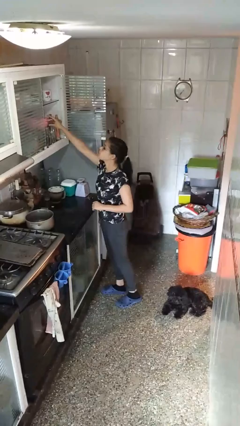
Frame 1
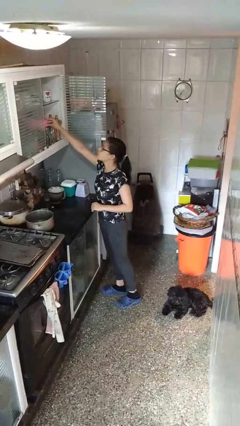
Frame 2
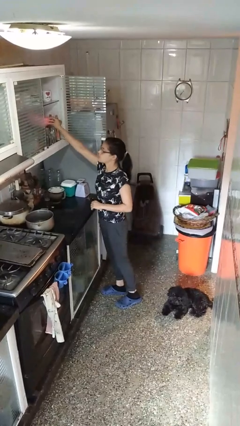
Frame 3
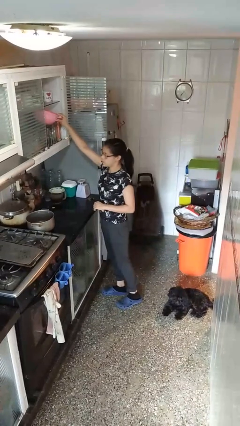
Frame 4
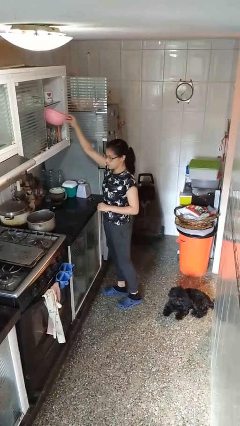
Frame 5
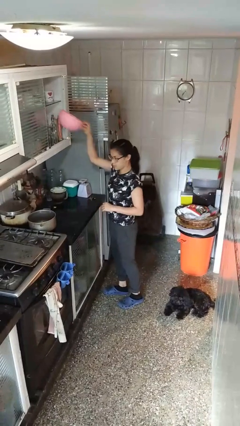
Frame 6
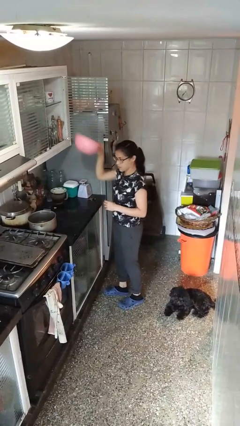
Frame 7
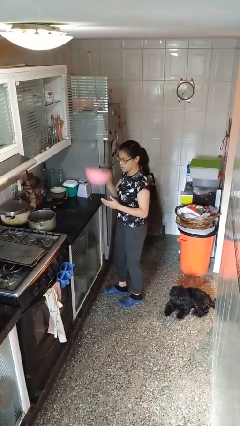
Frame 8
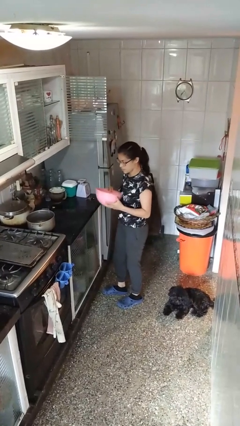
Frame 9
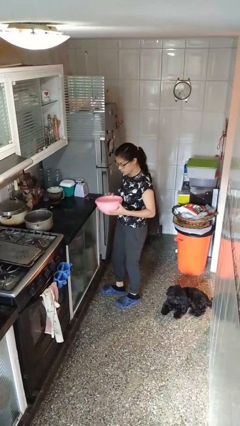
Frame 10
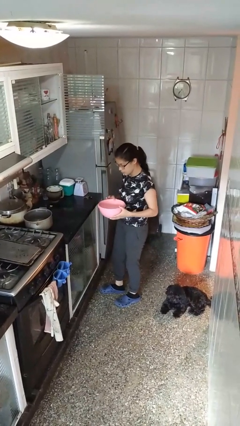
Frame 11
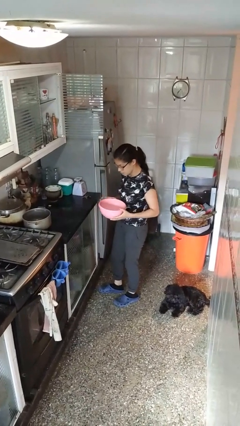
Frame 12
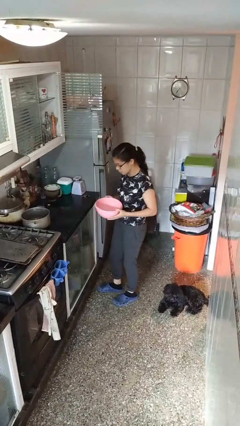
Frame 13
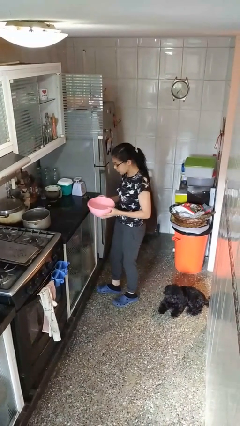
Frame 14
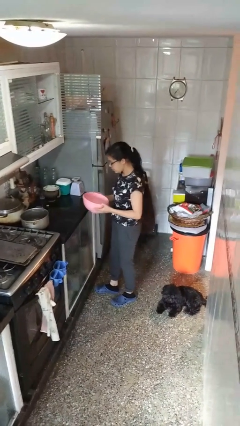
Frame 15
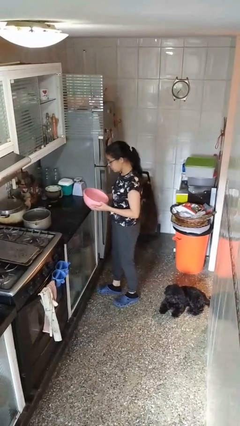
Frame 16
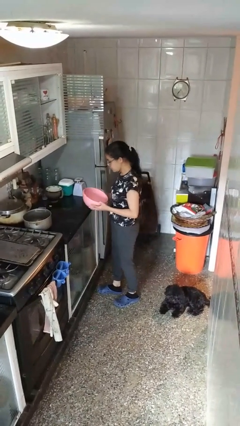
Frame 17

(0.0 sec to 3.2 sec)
person picks up object from cabinet

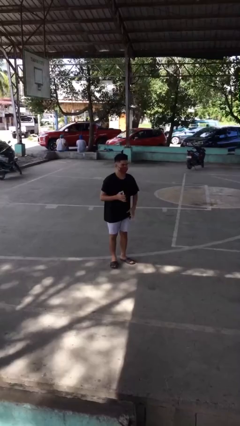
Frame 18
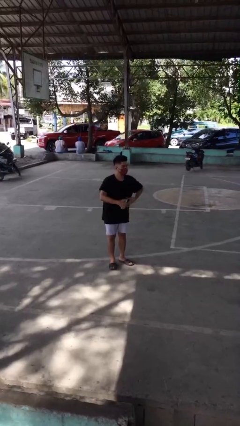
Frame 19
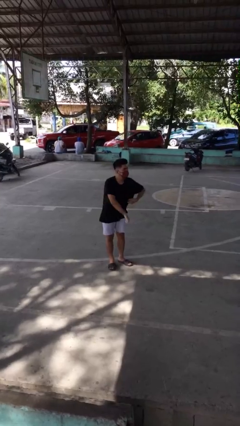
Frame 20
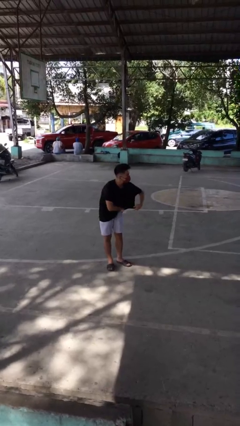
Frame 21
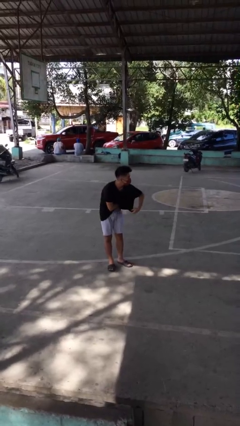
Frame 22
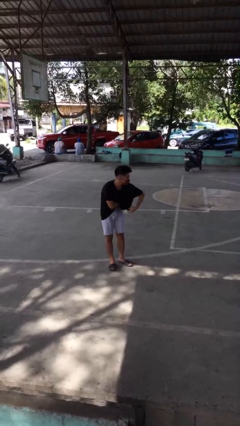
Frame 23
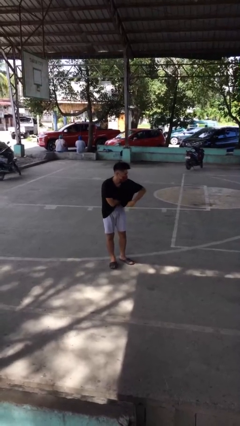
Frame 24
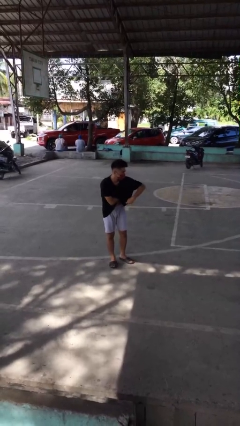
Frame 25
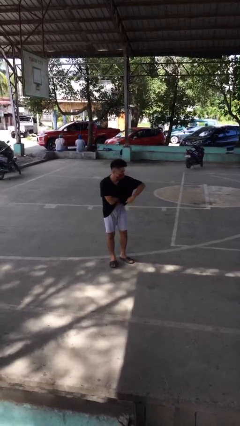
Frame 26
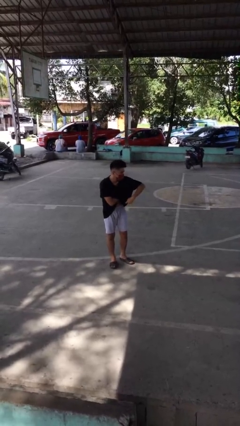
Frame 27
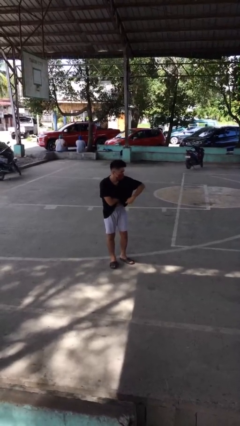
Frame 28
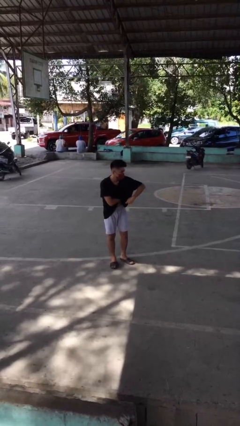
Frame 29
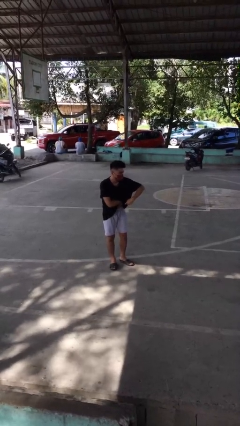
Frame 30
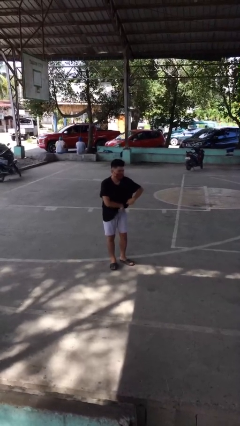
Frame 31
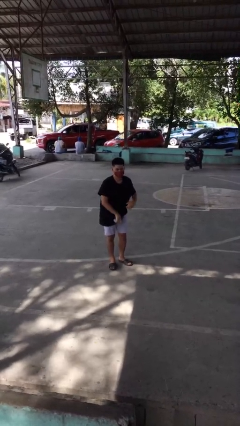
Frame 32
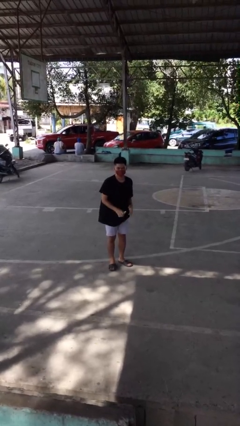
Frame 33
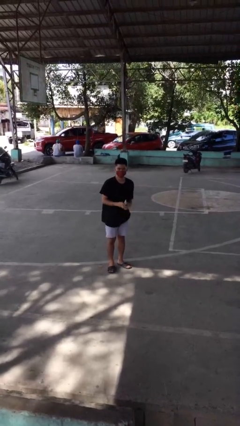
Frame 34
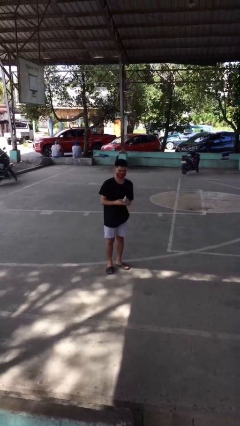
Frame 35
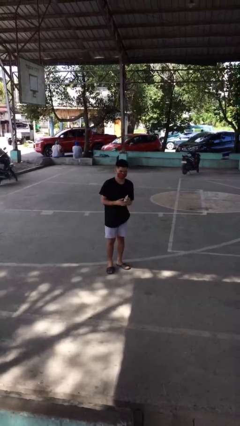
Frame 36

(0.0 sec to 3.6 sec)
person applies deodorant

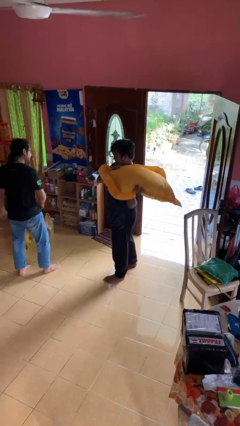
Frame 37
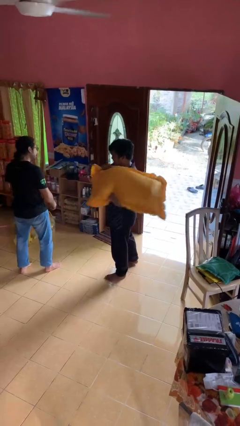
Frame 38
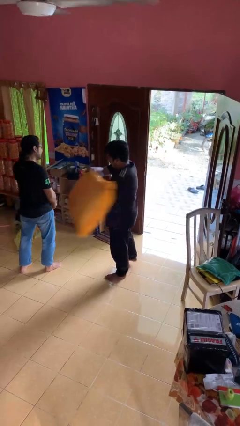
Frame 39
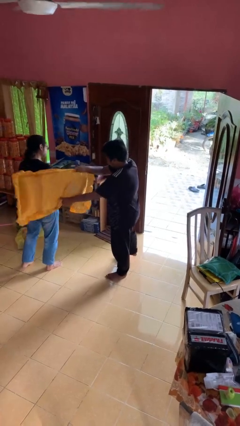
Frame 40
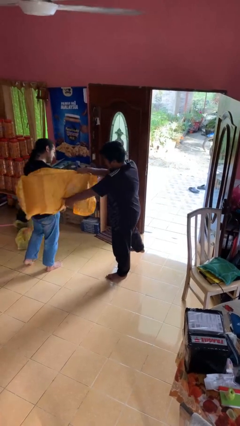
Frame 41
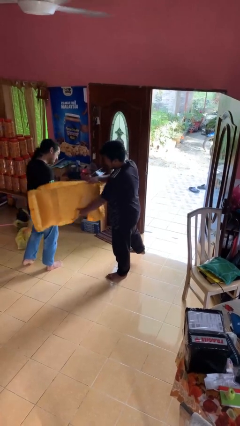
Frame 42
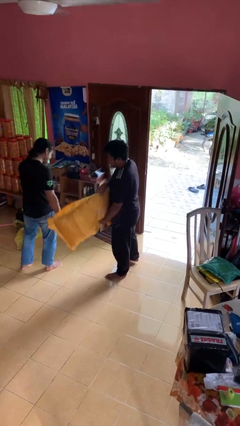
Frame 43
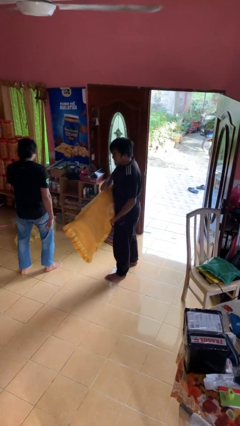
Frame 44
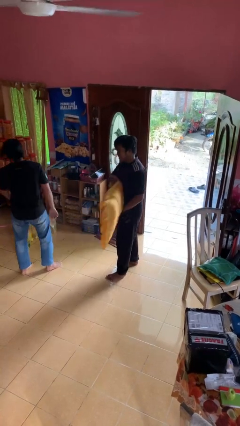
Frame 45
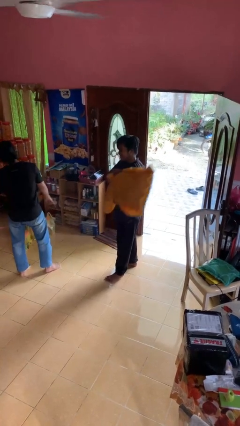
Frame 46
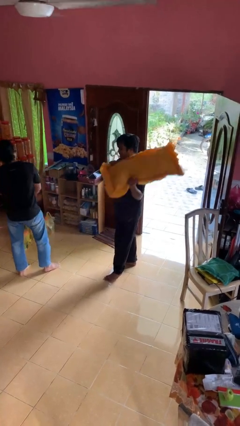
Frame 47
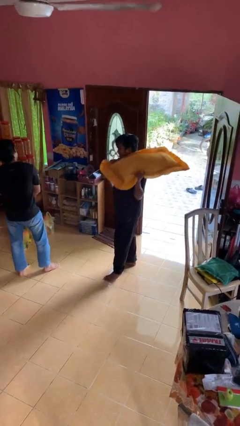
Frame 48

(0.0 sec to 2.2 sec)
person hits person with pillow

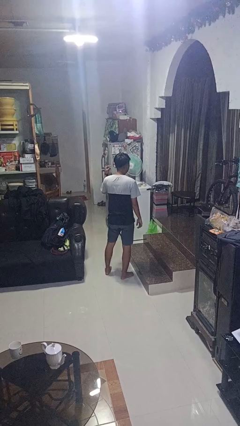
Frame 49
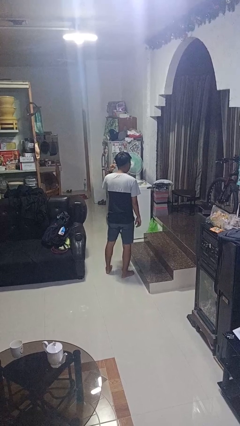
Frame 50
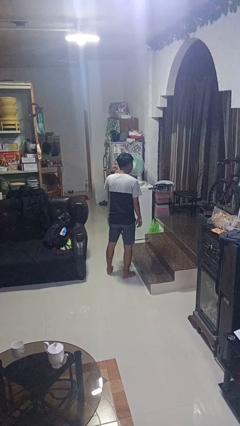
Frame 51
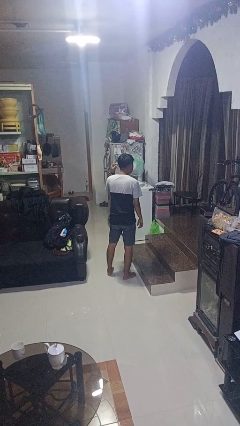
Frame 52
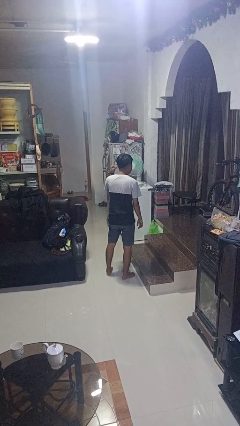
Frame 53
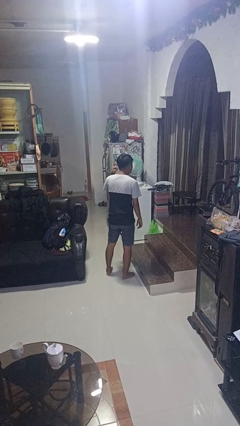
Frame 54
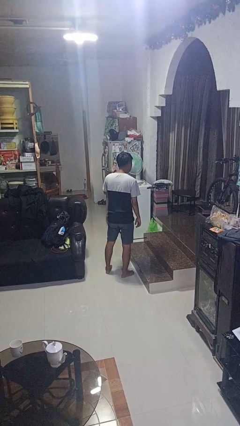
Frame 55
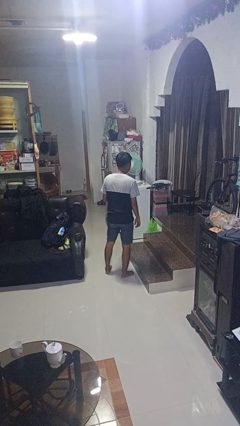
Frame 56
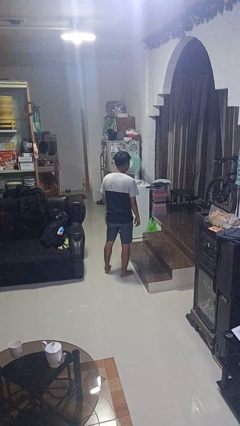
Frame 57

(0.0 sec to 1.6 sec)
person gestures listen closely

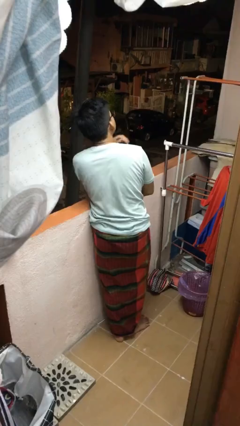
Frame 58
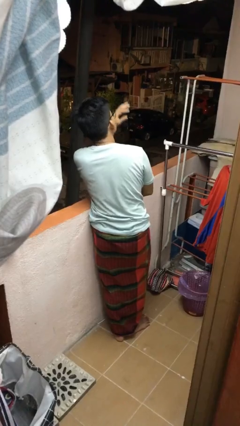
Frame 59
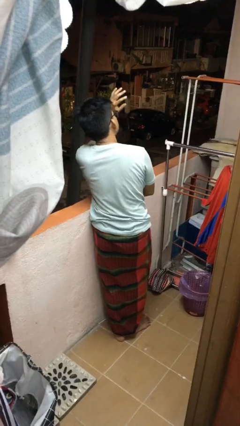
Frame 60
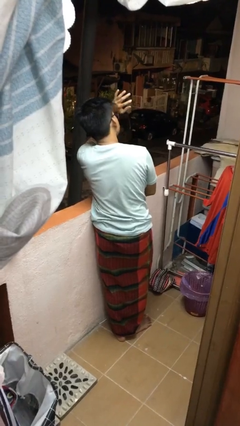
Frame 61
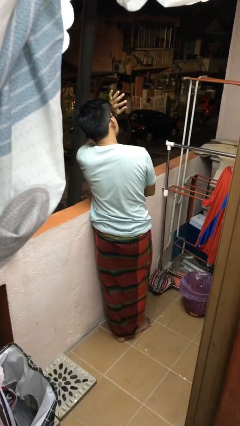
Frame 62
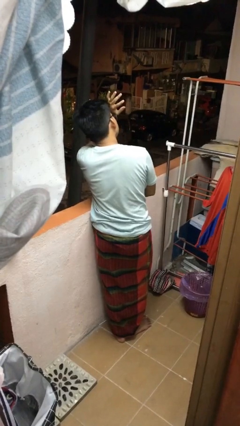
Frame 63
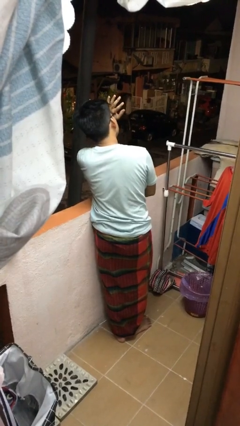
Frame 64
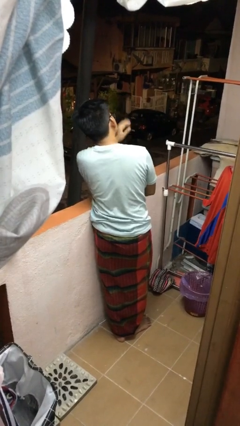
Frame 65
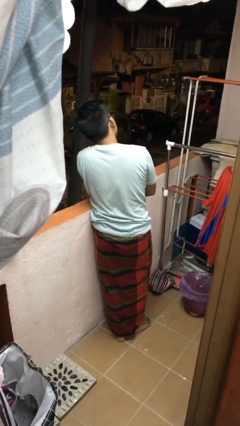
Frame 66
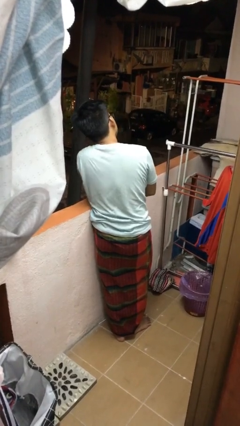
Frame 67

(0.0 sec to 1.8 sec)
person shades eyes

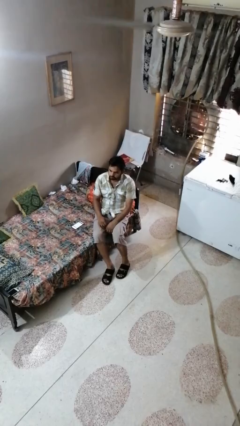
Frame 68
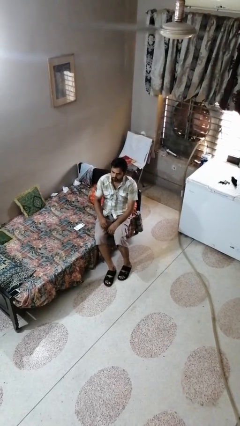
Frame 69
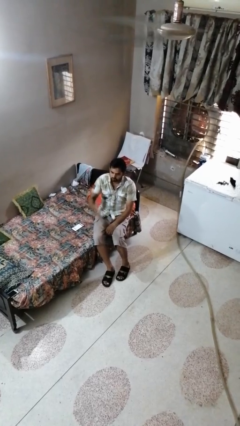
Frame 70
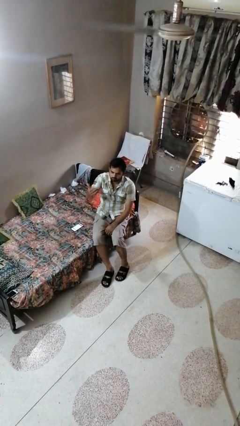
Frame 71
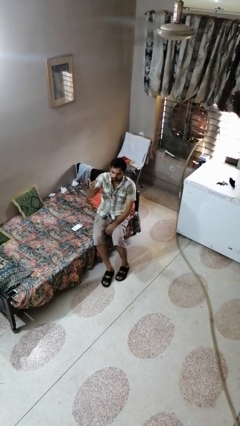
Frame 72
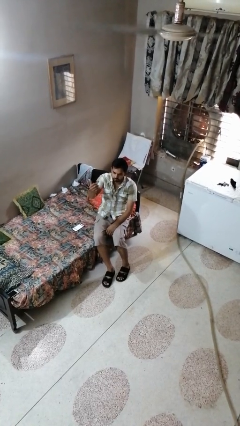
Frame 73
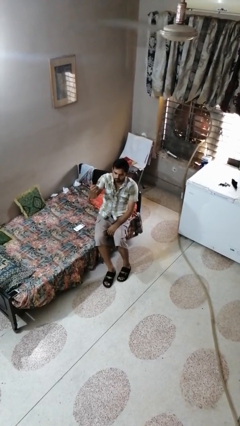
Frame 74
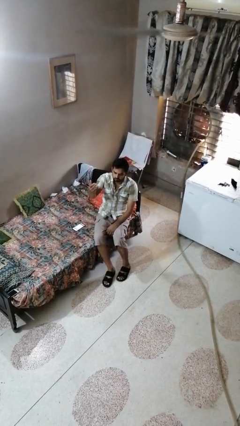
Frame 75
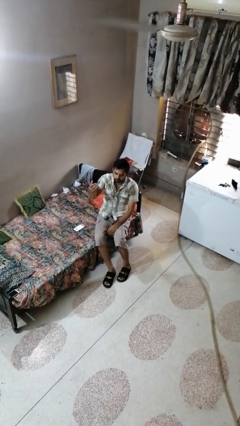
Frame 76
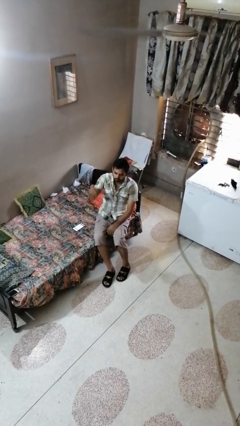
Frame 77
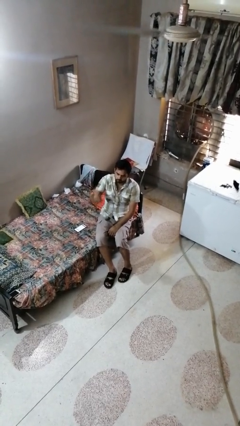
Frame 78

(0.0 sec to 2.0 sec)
person gestures come here

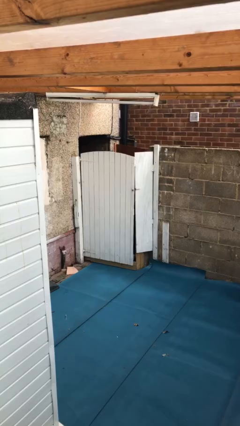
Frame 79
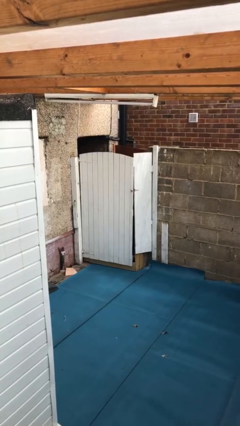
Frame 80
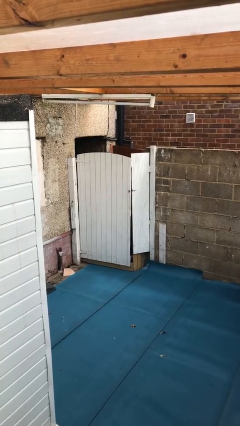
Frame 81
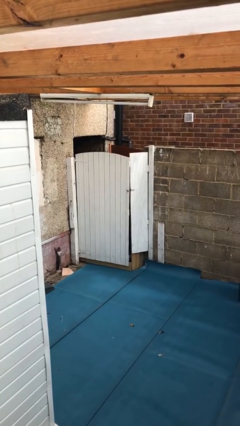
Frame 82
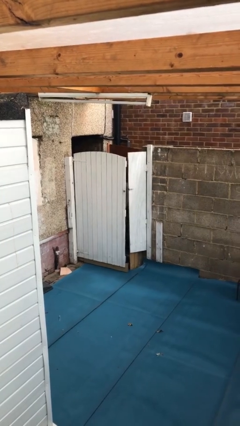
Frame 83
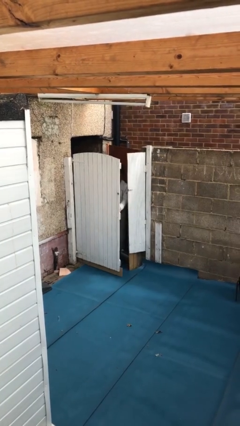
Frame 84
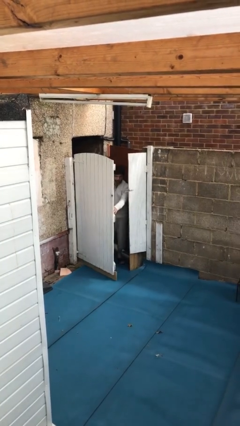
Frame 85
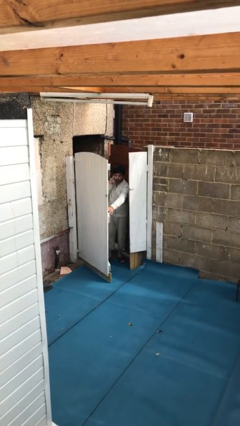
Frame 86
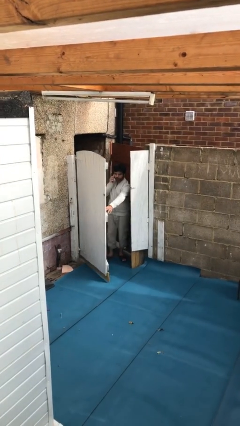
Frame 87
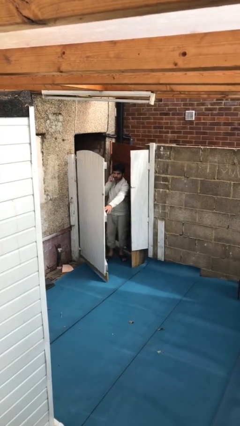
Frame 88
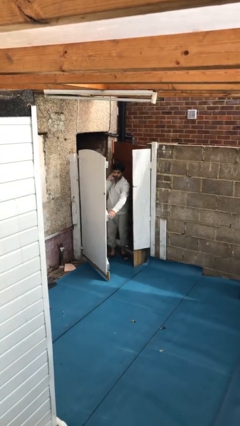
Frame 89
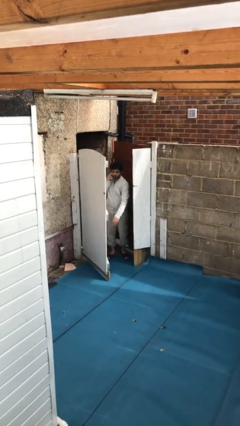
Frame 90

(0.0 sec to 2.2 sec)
person opens facility door

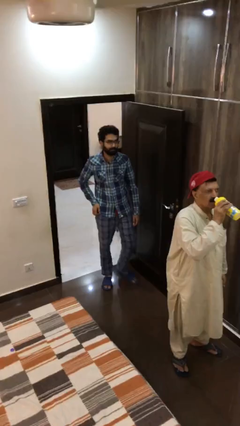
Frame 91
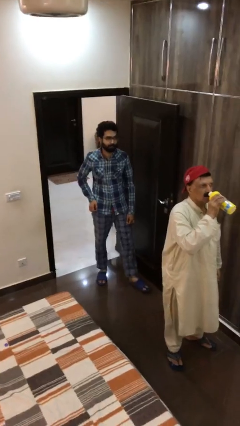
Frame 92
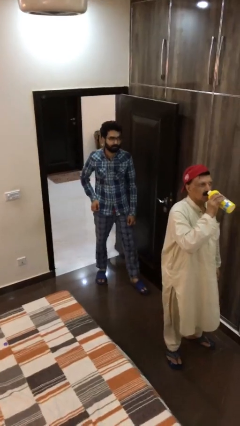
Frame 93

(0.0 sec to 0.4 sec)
person steals object from person
